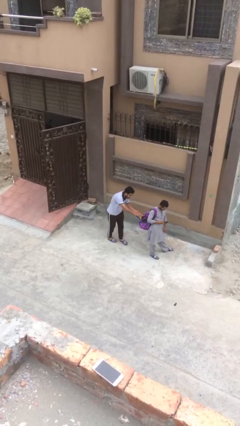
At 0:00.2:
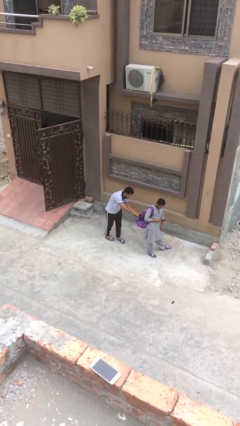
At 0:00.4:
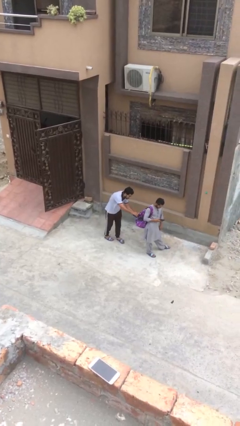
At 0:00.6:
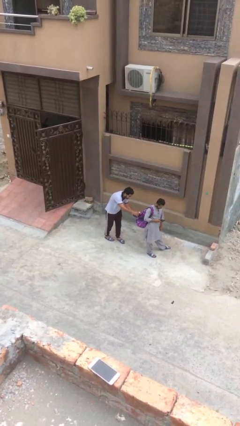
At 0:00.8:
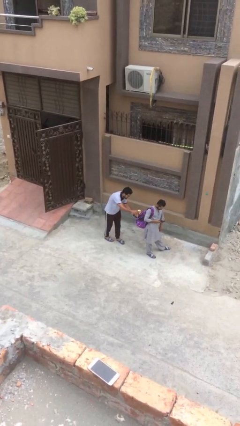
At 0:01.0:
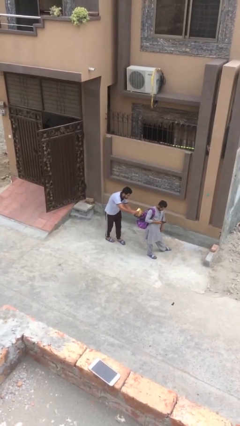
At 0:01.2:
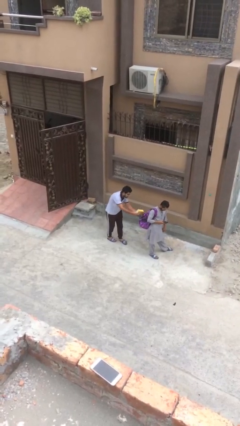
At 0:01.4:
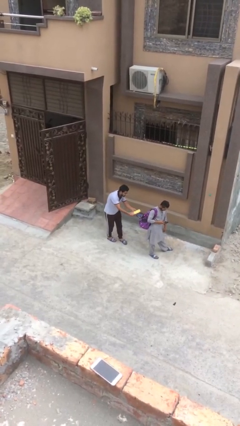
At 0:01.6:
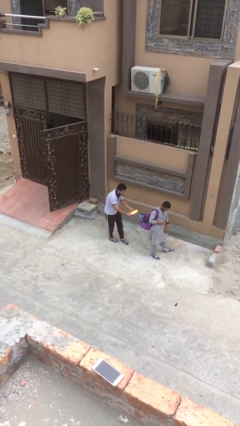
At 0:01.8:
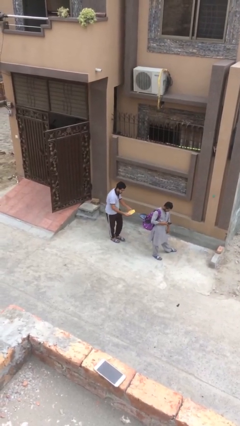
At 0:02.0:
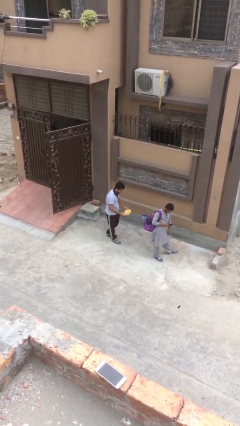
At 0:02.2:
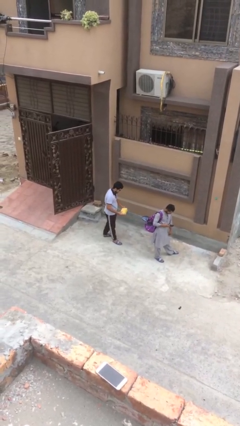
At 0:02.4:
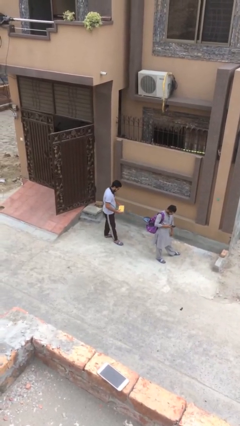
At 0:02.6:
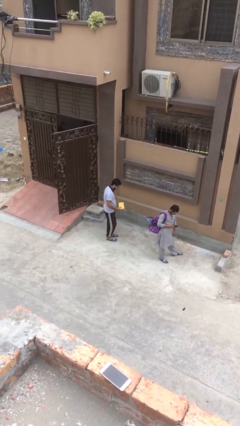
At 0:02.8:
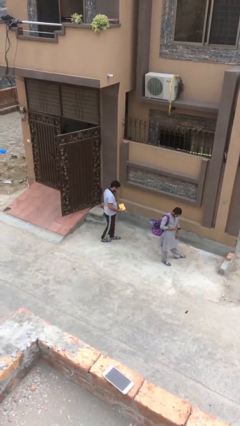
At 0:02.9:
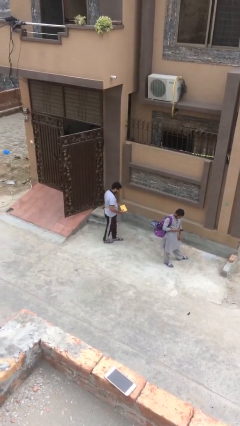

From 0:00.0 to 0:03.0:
person steals object from person

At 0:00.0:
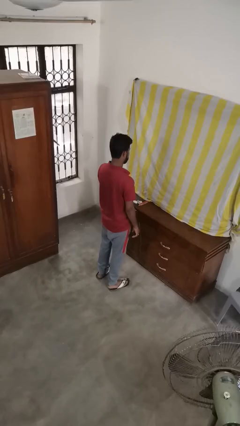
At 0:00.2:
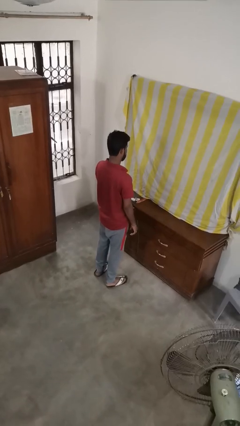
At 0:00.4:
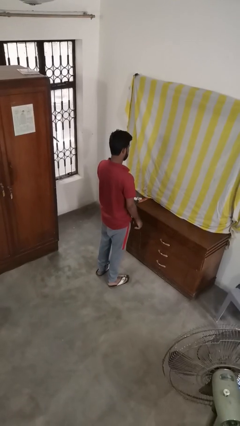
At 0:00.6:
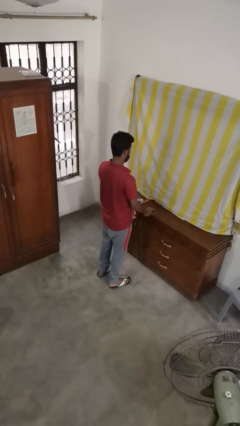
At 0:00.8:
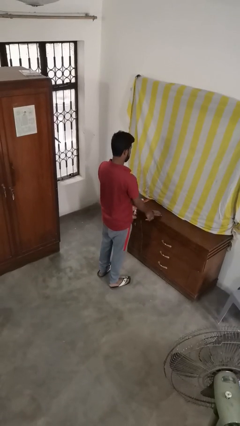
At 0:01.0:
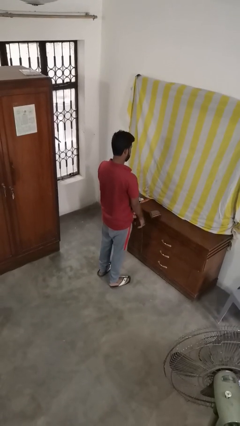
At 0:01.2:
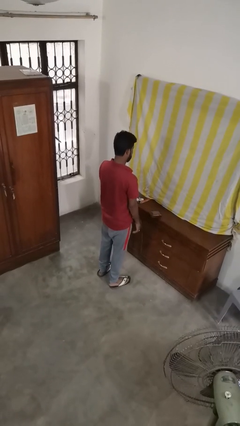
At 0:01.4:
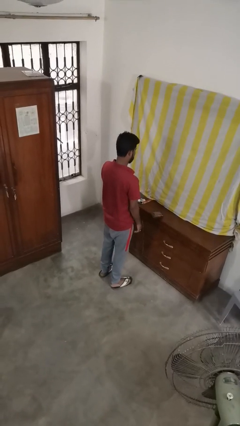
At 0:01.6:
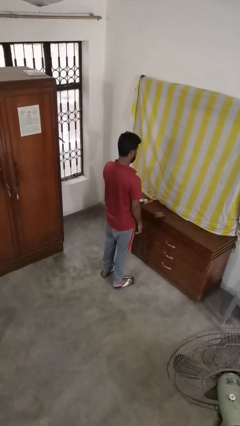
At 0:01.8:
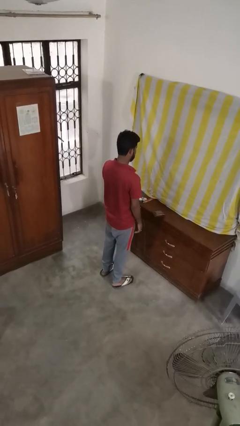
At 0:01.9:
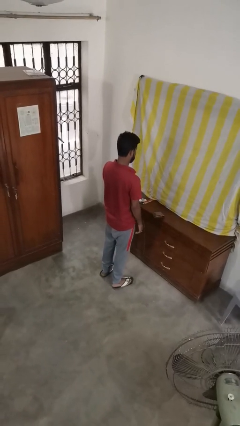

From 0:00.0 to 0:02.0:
person throws object on table

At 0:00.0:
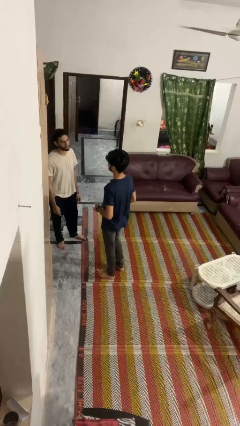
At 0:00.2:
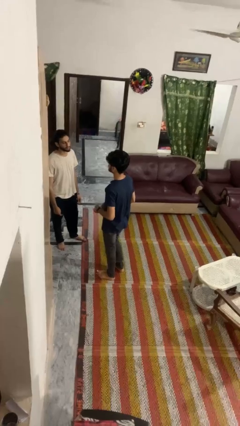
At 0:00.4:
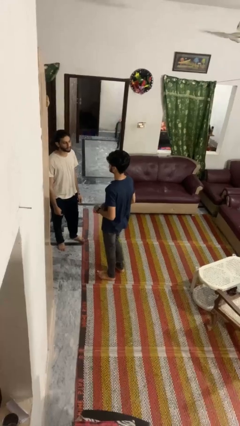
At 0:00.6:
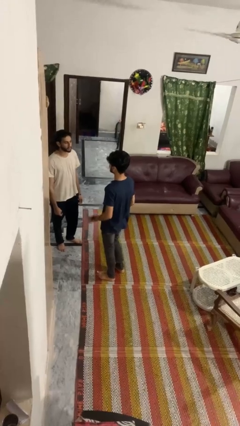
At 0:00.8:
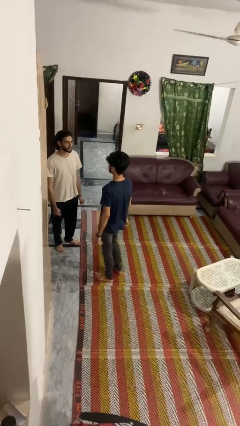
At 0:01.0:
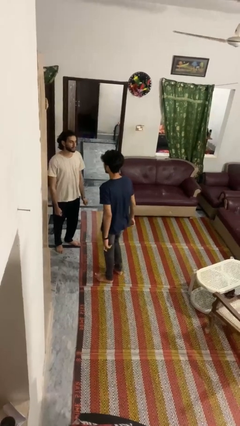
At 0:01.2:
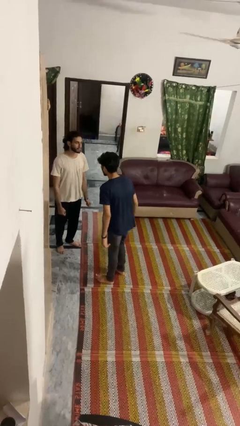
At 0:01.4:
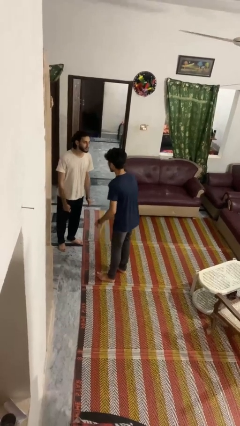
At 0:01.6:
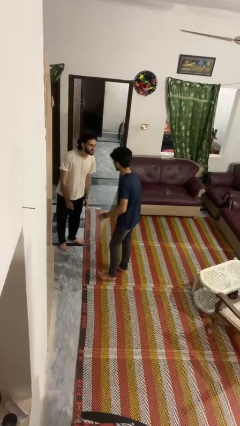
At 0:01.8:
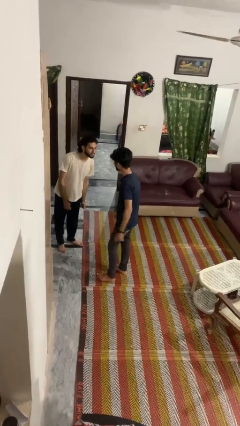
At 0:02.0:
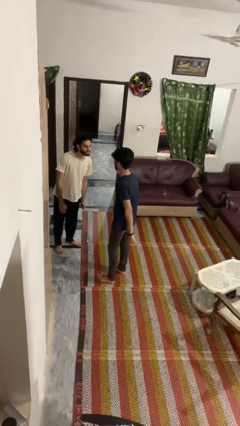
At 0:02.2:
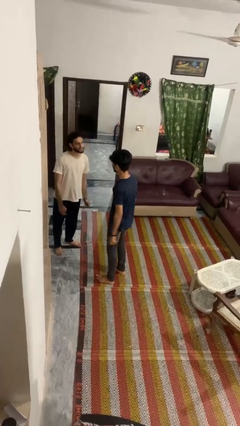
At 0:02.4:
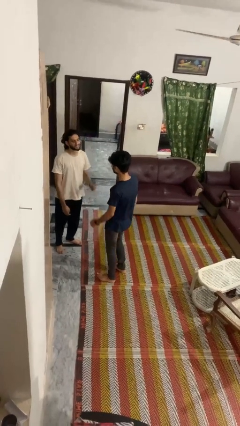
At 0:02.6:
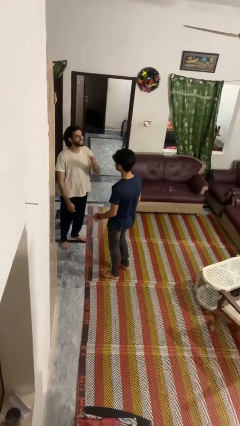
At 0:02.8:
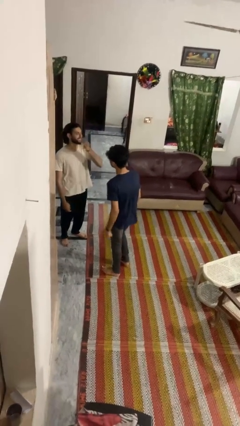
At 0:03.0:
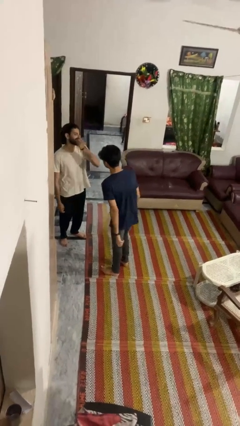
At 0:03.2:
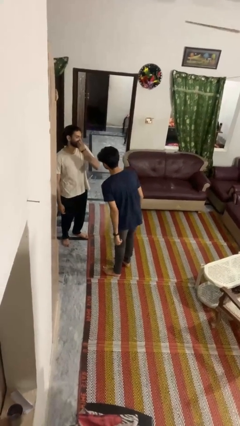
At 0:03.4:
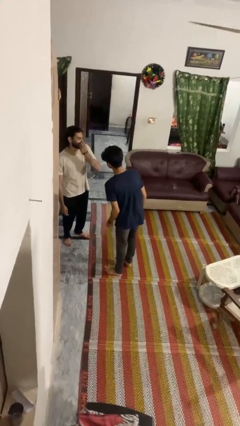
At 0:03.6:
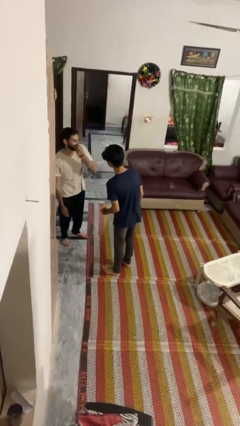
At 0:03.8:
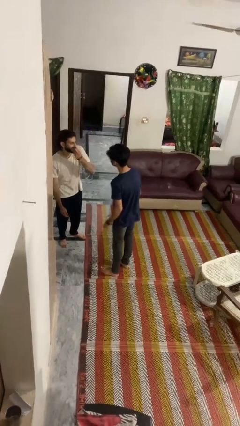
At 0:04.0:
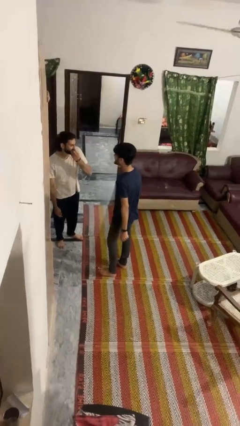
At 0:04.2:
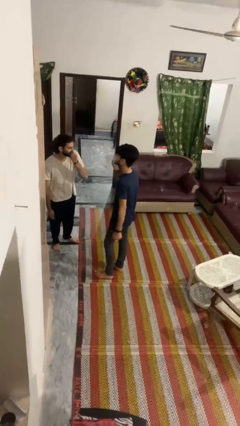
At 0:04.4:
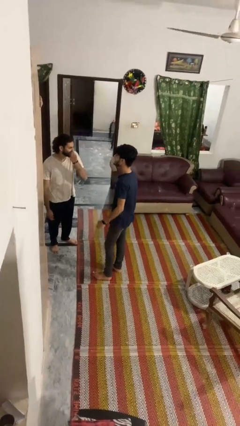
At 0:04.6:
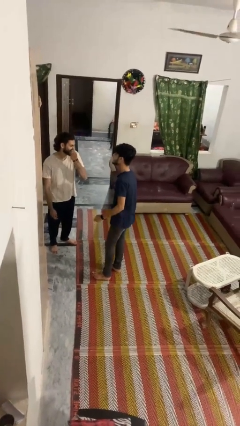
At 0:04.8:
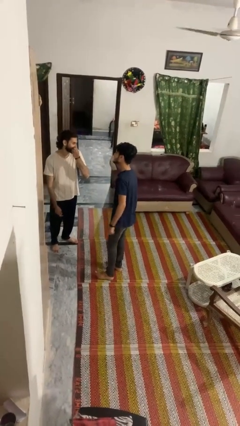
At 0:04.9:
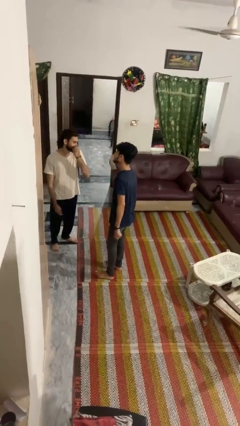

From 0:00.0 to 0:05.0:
person laughs with person

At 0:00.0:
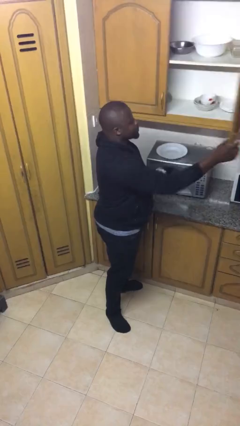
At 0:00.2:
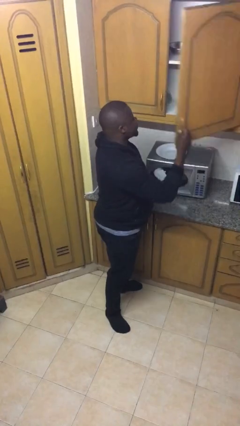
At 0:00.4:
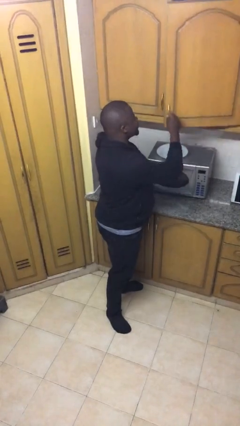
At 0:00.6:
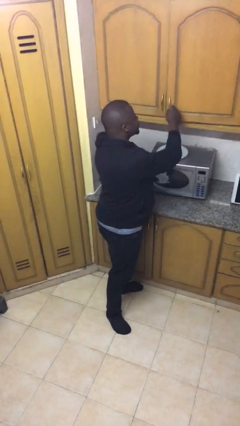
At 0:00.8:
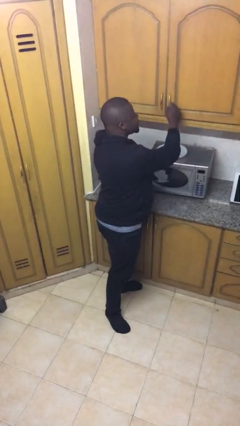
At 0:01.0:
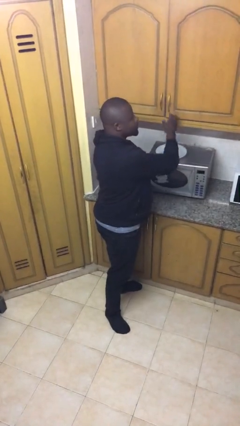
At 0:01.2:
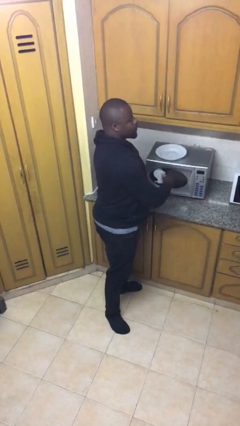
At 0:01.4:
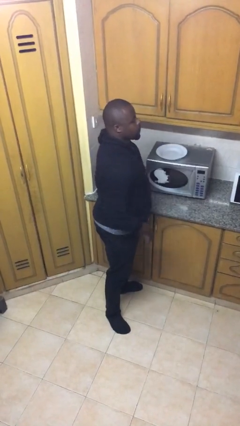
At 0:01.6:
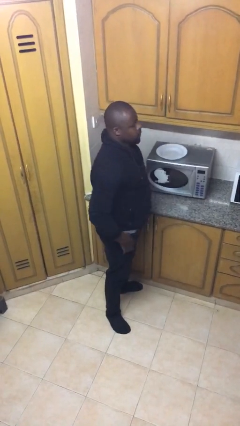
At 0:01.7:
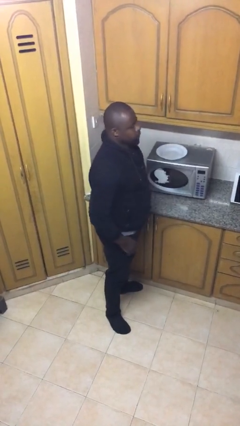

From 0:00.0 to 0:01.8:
person closes cabinet

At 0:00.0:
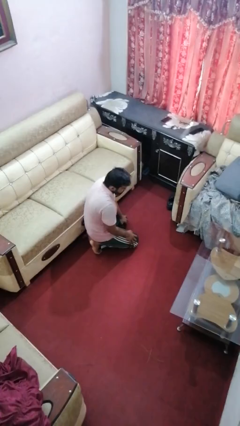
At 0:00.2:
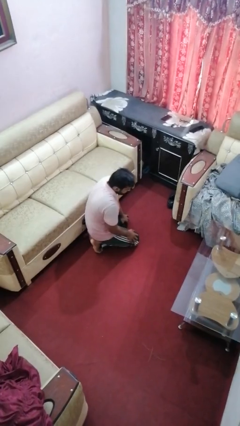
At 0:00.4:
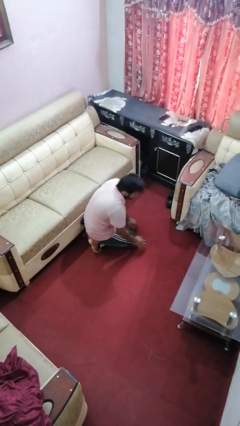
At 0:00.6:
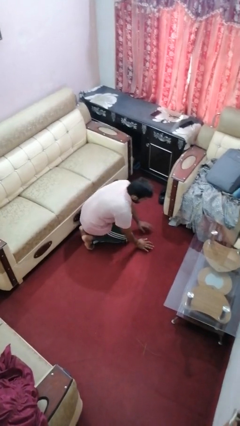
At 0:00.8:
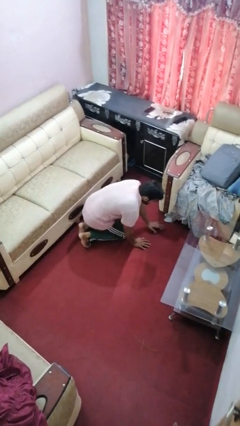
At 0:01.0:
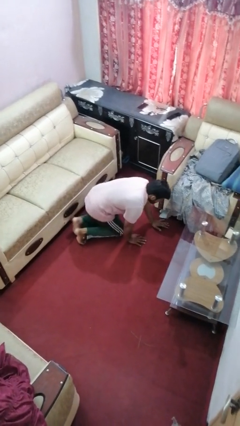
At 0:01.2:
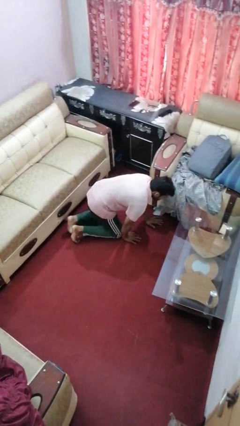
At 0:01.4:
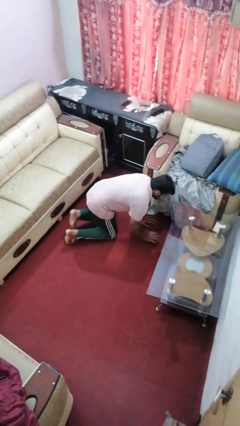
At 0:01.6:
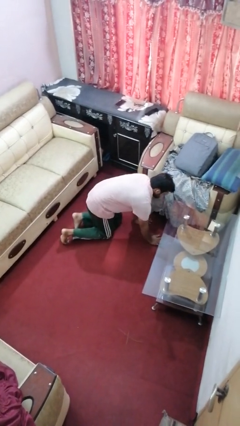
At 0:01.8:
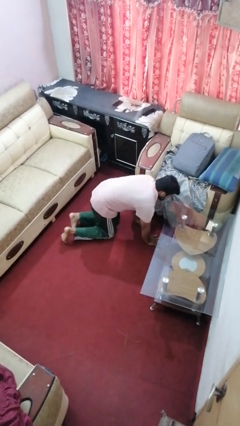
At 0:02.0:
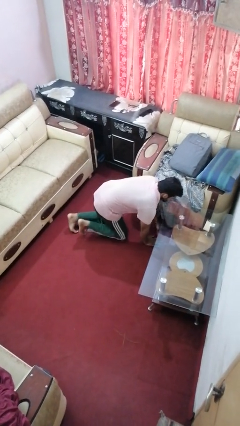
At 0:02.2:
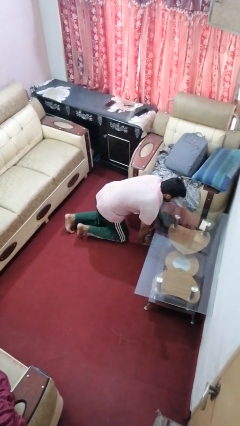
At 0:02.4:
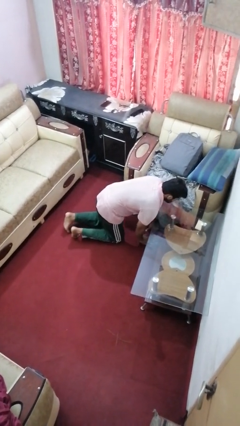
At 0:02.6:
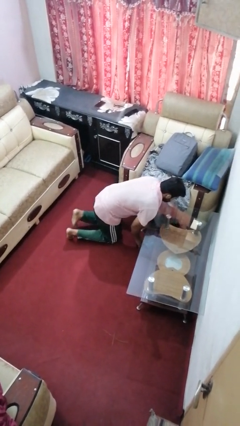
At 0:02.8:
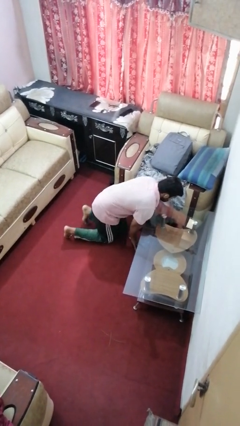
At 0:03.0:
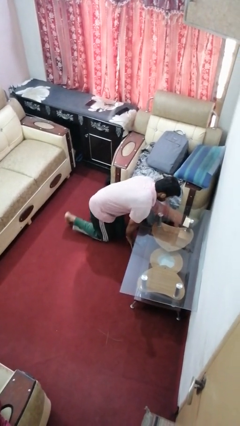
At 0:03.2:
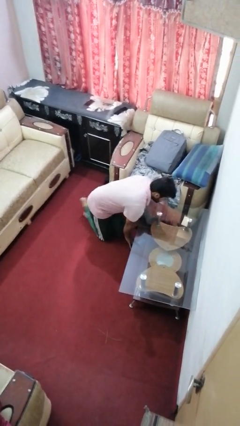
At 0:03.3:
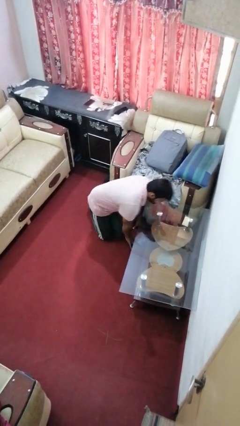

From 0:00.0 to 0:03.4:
person crawls

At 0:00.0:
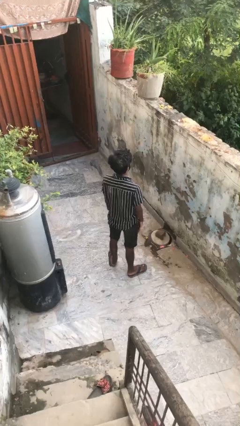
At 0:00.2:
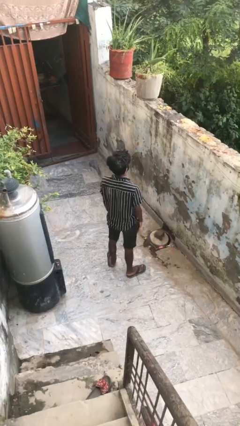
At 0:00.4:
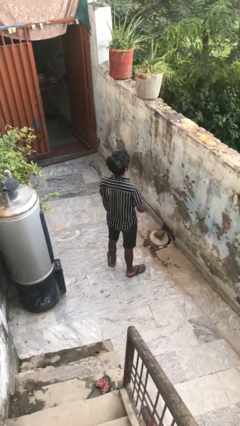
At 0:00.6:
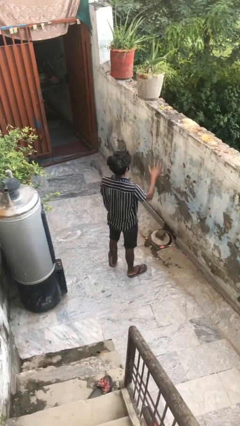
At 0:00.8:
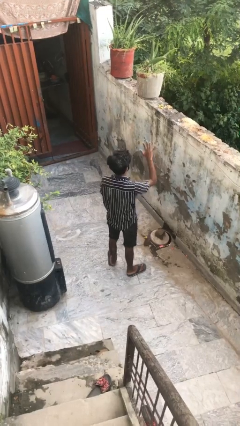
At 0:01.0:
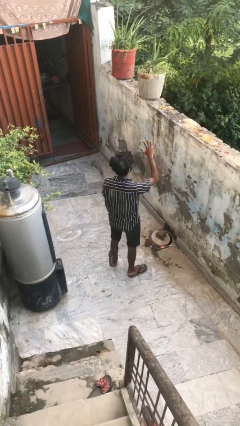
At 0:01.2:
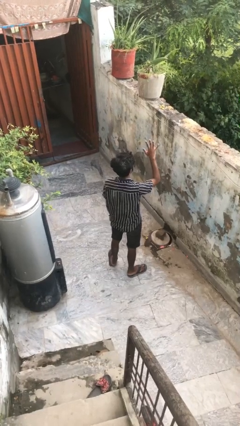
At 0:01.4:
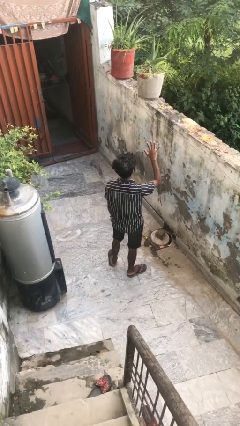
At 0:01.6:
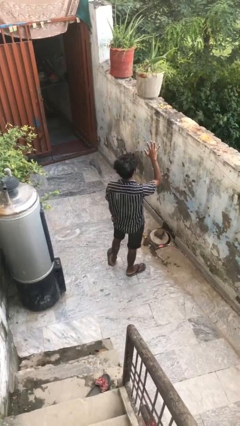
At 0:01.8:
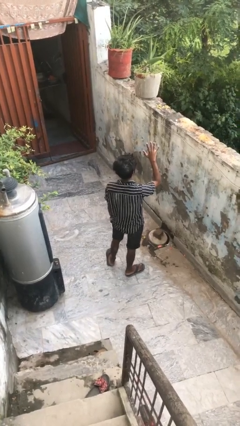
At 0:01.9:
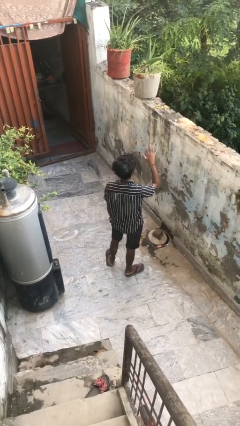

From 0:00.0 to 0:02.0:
person gestures number five
